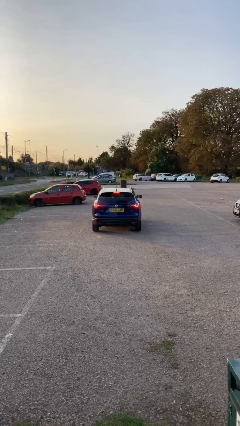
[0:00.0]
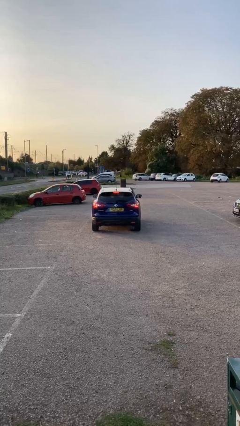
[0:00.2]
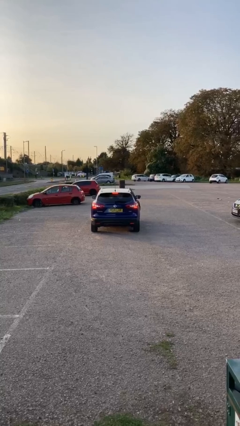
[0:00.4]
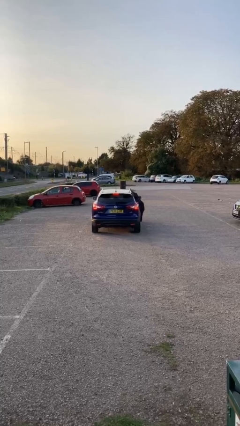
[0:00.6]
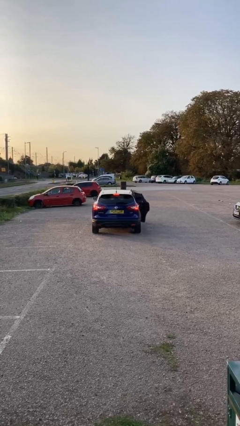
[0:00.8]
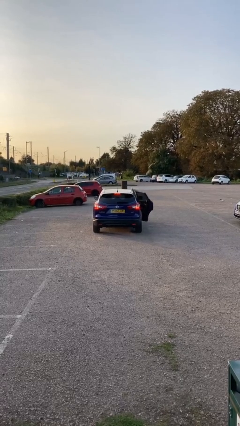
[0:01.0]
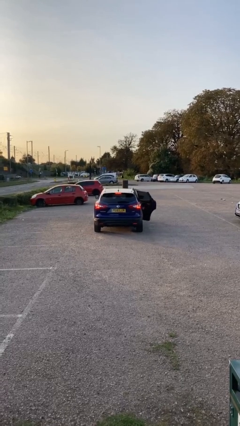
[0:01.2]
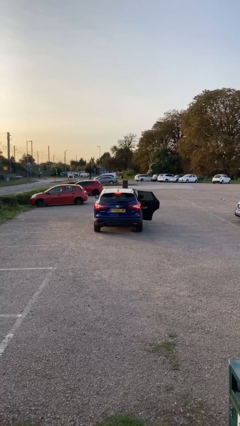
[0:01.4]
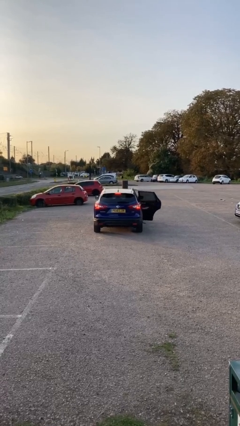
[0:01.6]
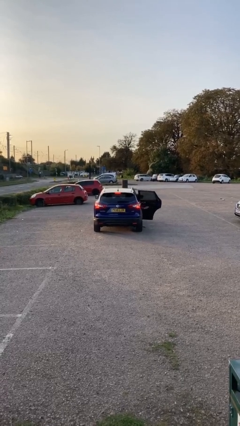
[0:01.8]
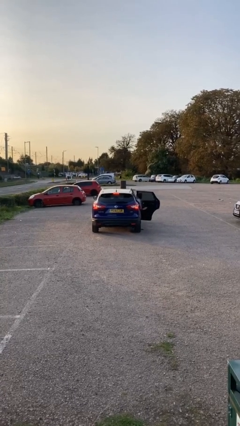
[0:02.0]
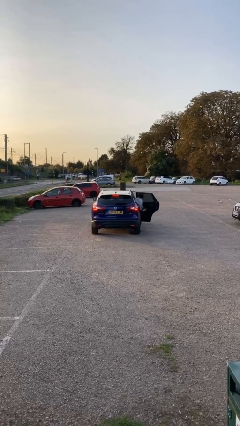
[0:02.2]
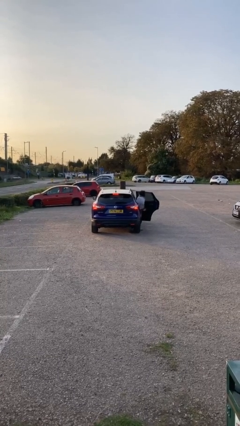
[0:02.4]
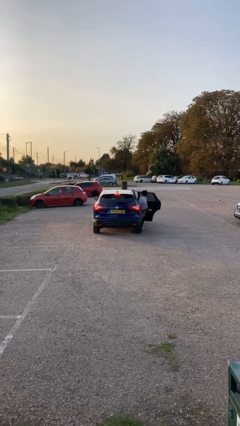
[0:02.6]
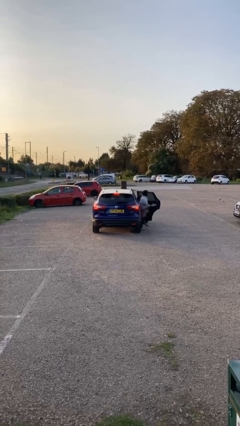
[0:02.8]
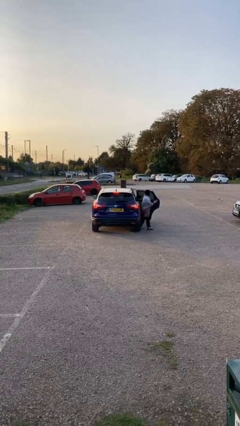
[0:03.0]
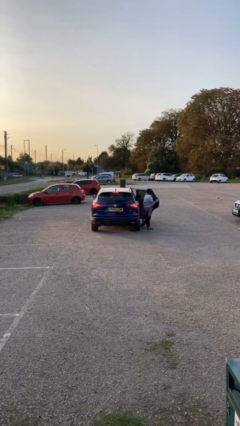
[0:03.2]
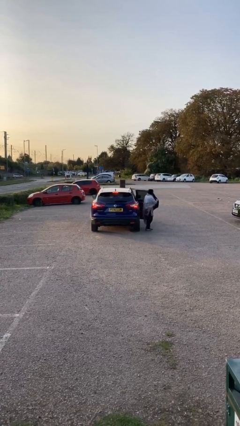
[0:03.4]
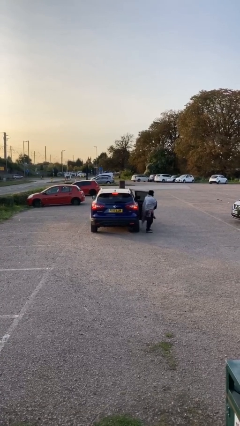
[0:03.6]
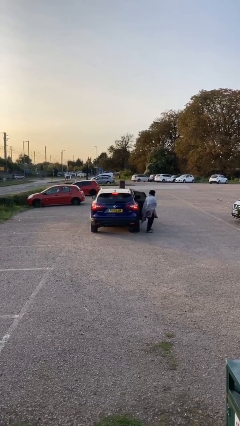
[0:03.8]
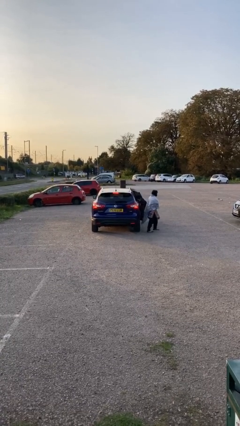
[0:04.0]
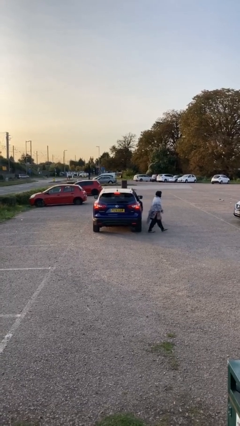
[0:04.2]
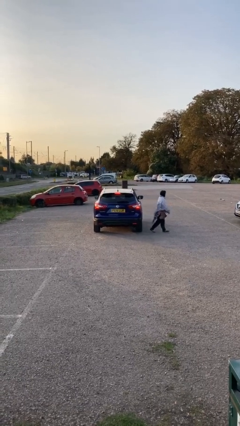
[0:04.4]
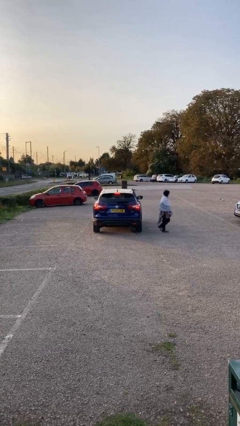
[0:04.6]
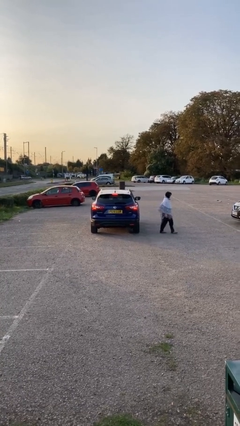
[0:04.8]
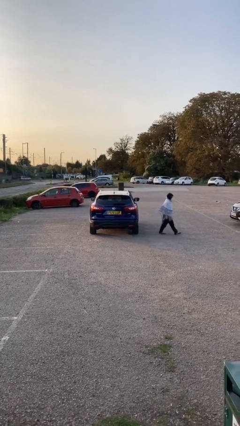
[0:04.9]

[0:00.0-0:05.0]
car drops off person

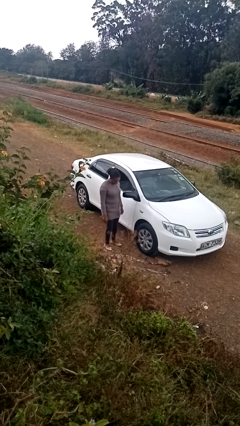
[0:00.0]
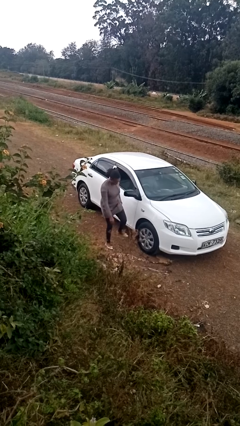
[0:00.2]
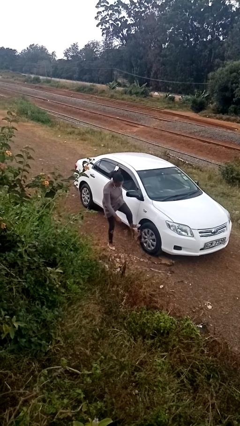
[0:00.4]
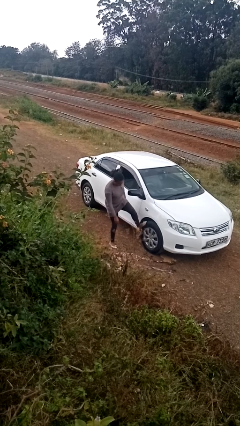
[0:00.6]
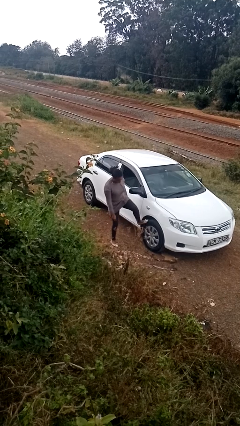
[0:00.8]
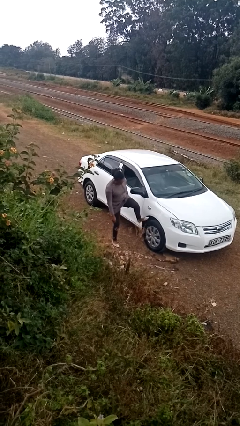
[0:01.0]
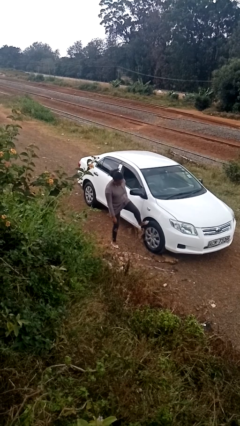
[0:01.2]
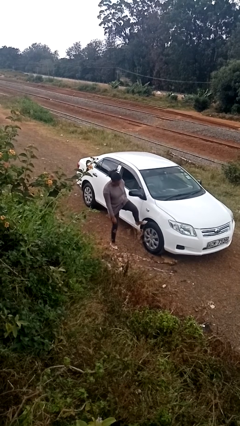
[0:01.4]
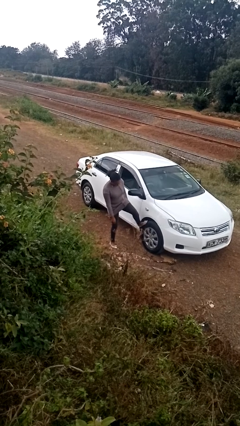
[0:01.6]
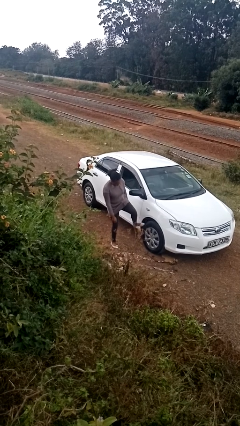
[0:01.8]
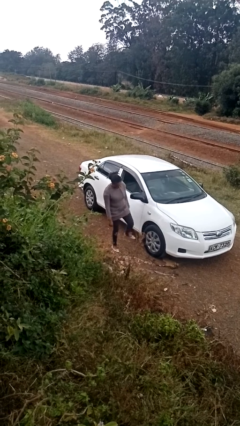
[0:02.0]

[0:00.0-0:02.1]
person kicks car tires

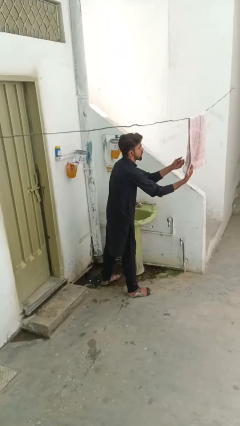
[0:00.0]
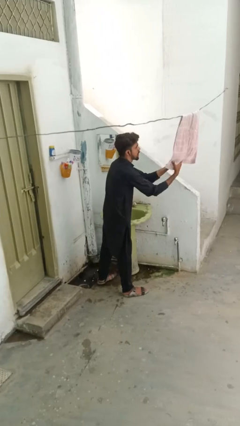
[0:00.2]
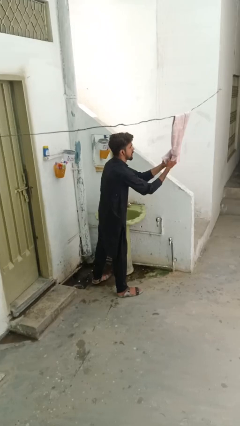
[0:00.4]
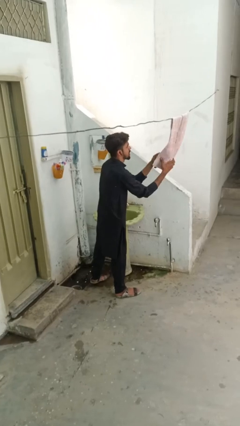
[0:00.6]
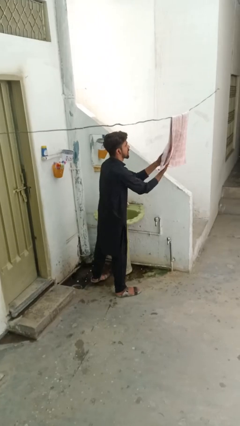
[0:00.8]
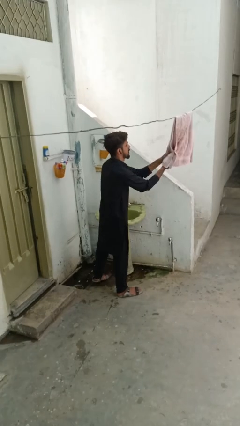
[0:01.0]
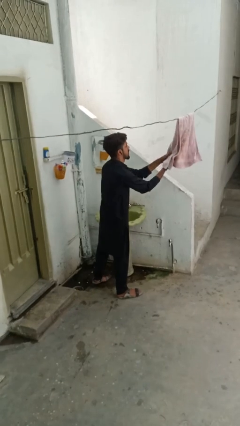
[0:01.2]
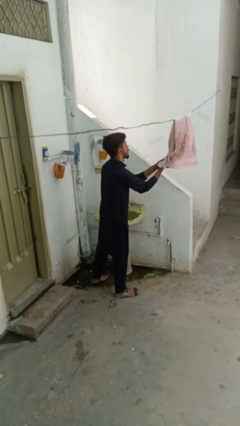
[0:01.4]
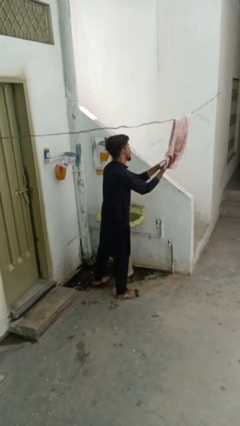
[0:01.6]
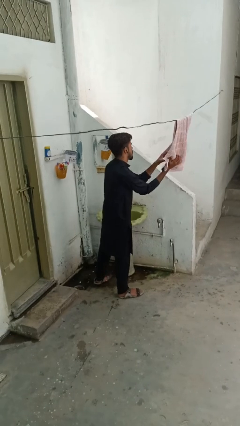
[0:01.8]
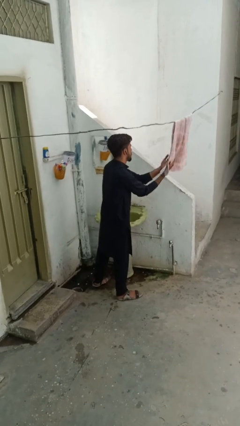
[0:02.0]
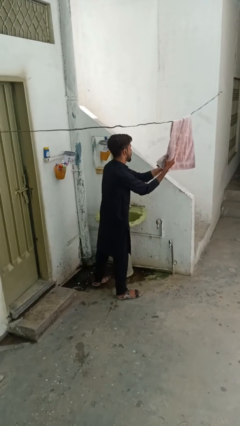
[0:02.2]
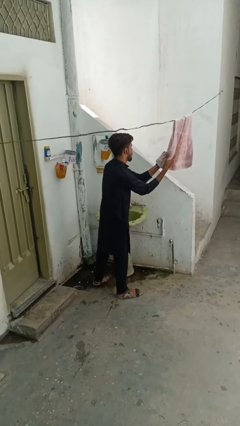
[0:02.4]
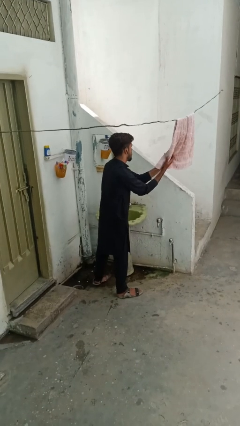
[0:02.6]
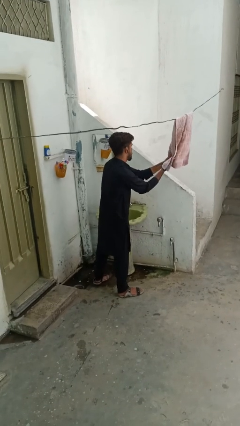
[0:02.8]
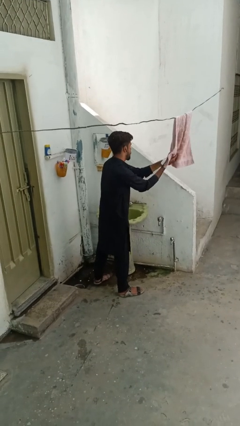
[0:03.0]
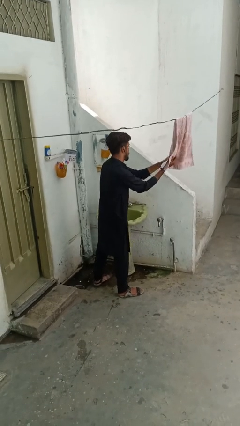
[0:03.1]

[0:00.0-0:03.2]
person dries hands with towel

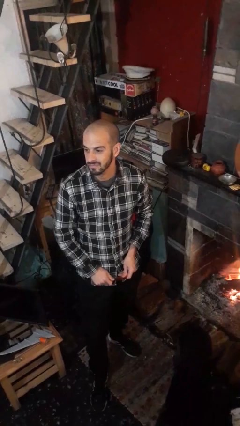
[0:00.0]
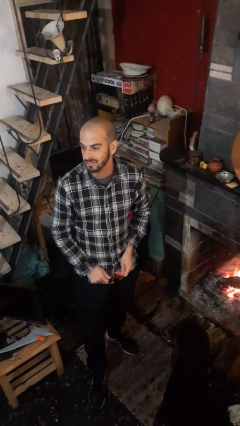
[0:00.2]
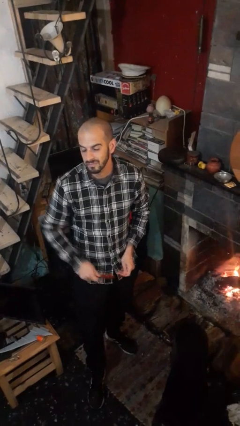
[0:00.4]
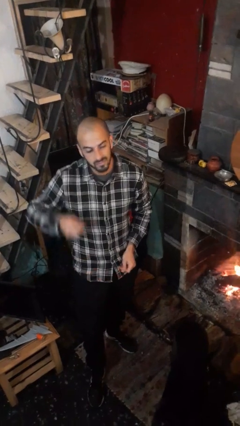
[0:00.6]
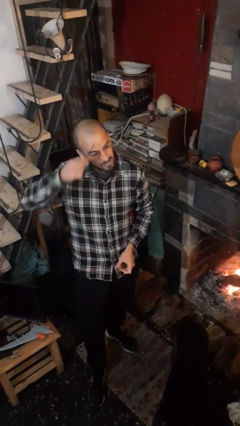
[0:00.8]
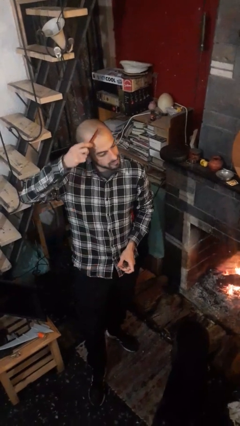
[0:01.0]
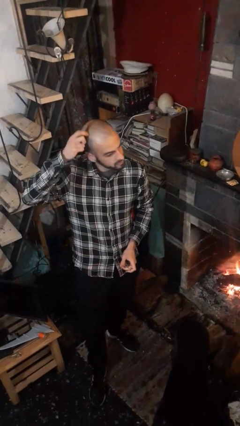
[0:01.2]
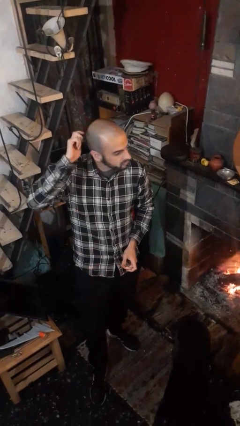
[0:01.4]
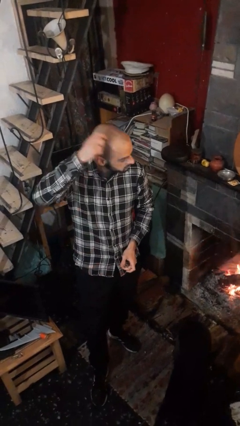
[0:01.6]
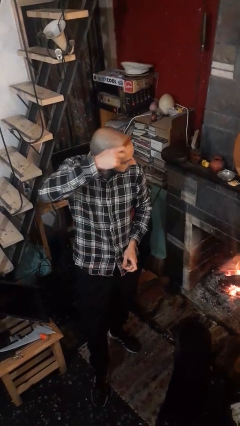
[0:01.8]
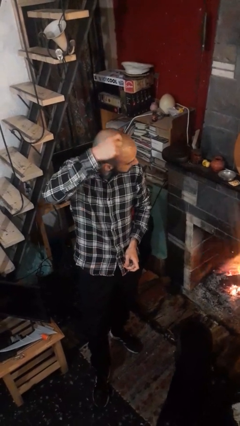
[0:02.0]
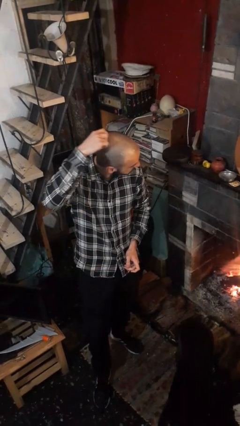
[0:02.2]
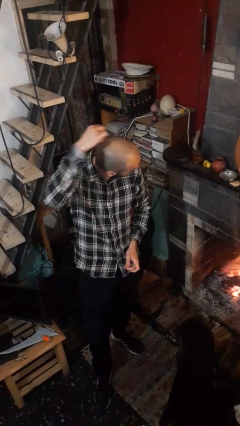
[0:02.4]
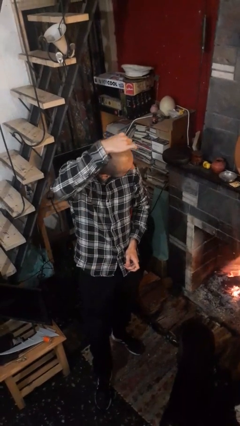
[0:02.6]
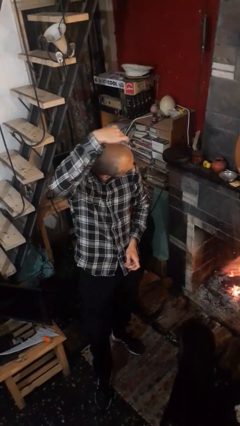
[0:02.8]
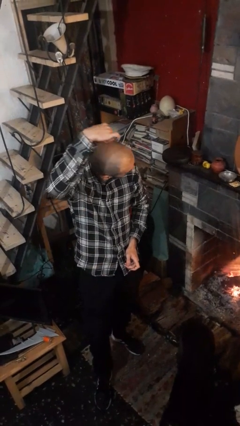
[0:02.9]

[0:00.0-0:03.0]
person brushes hair

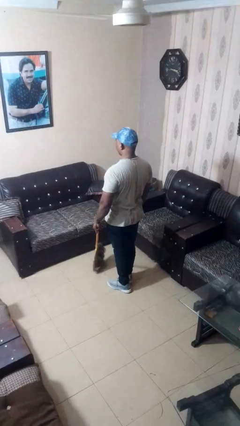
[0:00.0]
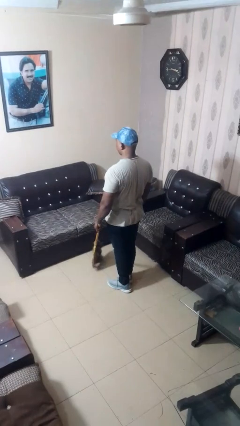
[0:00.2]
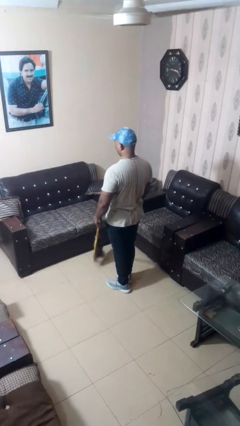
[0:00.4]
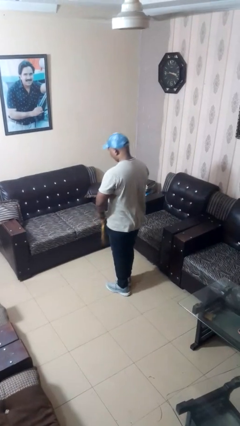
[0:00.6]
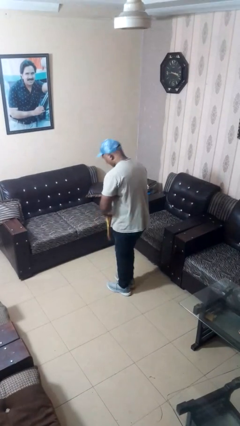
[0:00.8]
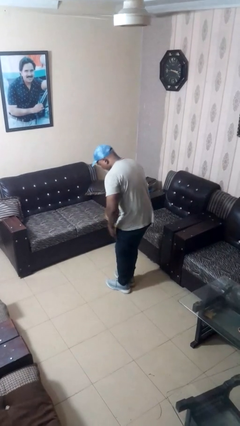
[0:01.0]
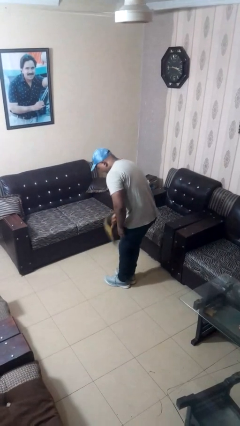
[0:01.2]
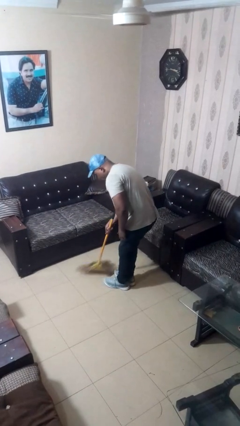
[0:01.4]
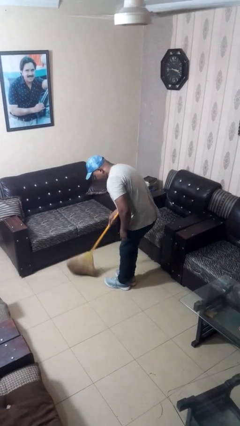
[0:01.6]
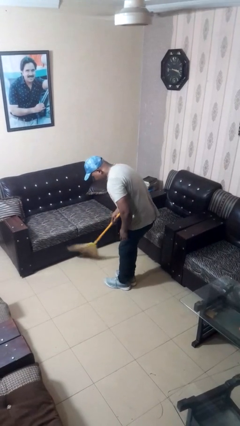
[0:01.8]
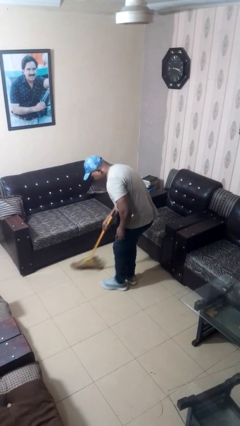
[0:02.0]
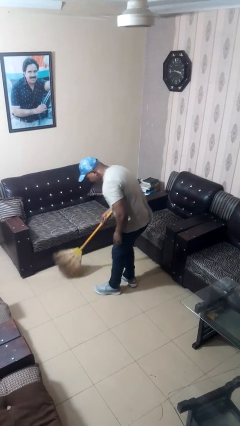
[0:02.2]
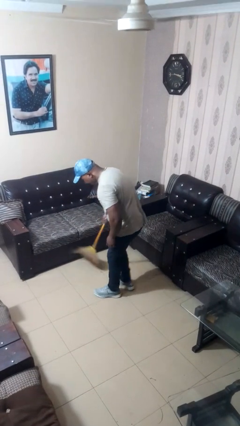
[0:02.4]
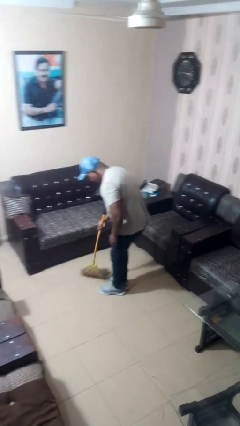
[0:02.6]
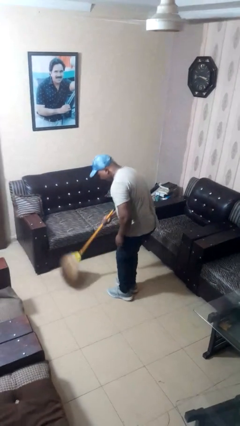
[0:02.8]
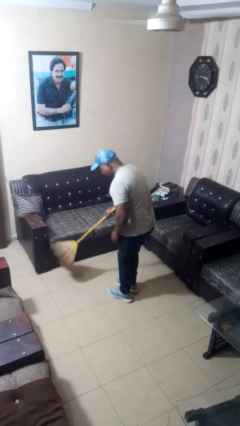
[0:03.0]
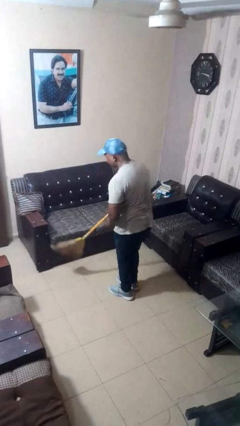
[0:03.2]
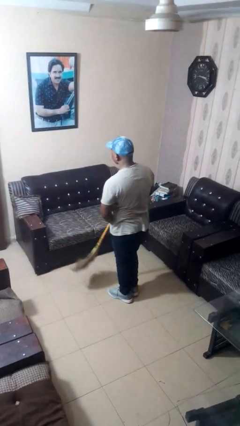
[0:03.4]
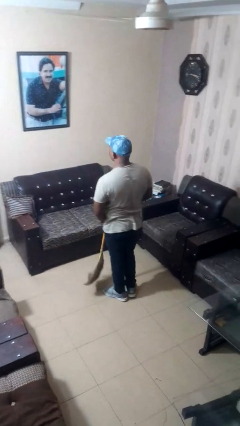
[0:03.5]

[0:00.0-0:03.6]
person sweeps floor

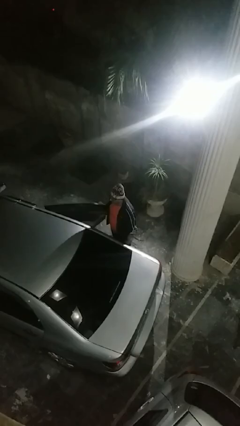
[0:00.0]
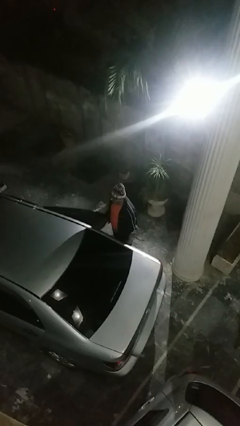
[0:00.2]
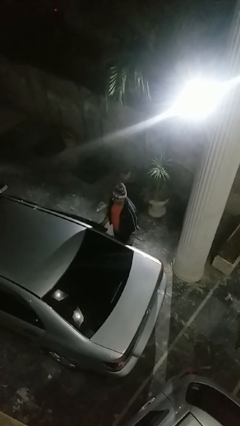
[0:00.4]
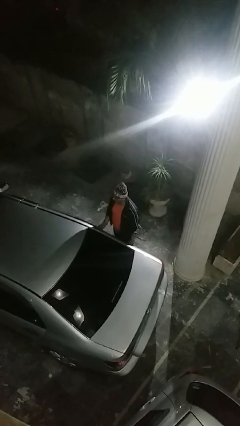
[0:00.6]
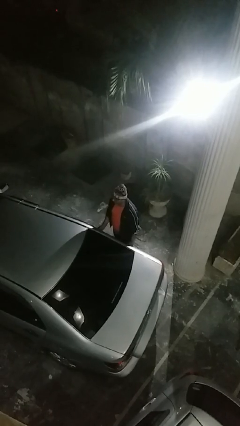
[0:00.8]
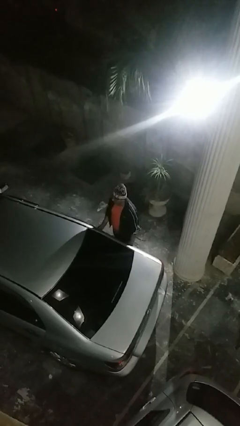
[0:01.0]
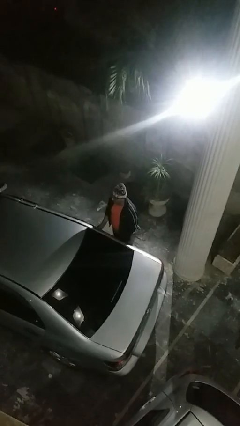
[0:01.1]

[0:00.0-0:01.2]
person closes car door
